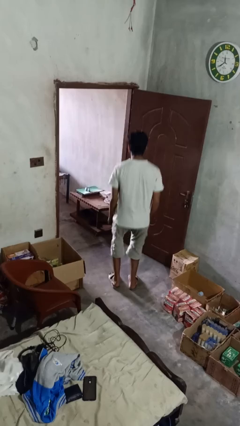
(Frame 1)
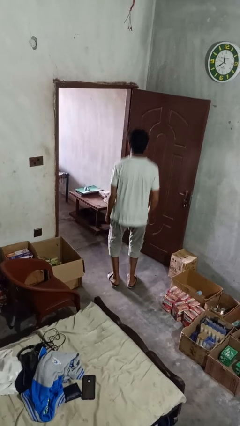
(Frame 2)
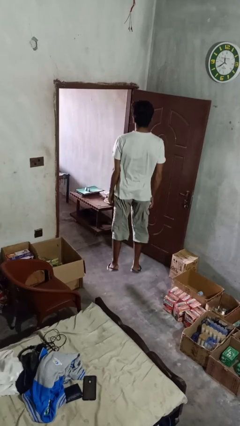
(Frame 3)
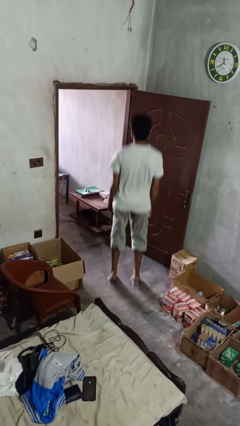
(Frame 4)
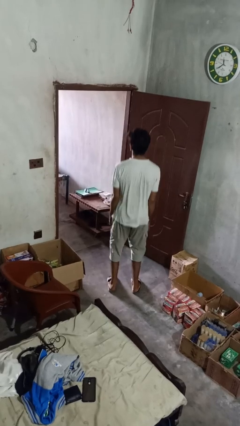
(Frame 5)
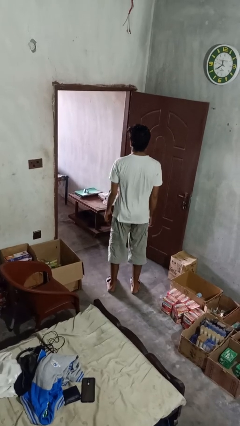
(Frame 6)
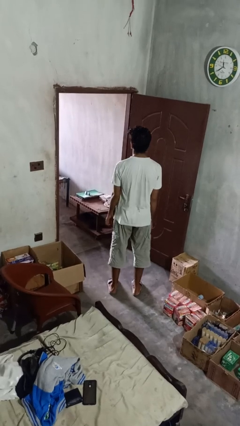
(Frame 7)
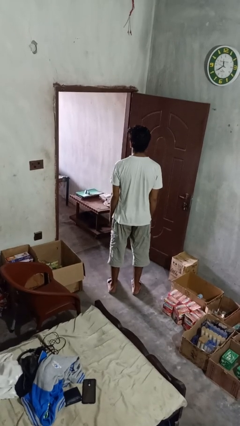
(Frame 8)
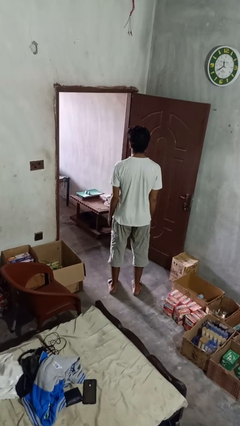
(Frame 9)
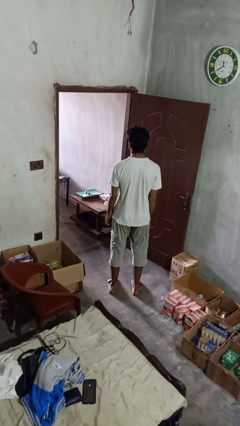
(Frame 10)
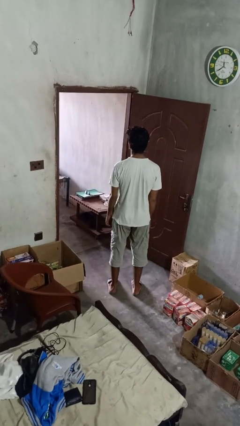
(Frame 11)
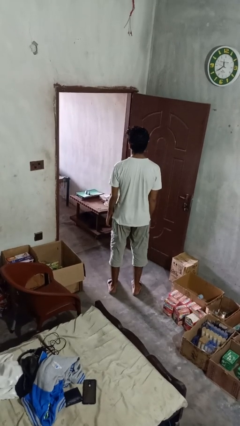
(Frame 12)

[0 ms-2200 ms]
person jumps

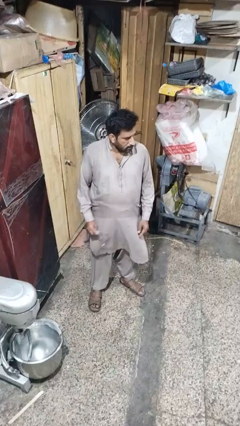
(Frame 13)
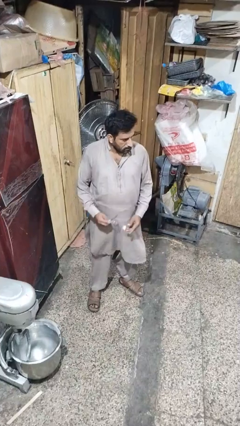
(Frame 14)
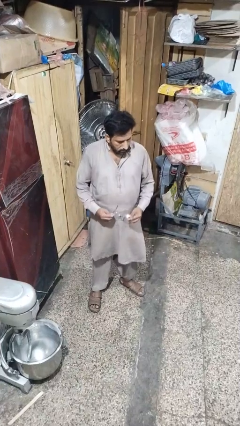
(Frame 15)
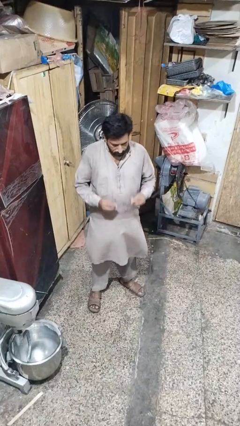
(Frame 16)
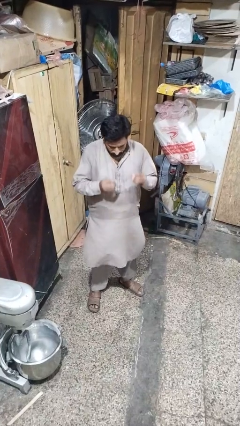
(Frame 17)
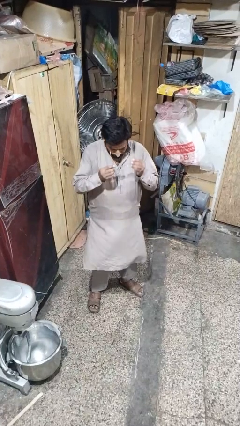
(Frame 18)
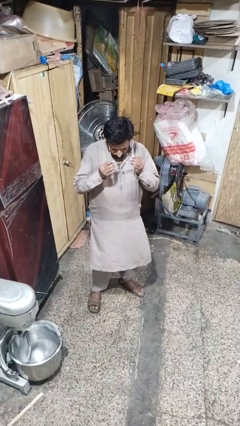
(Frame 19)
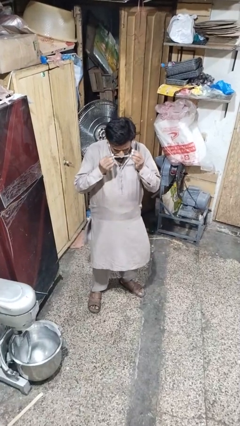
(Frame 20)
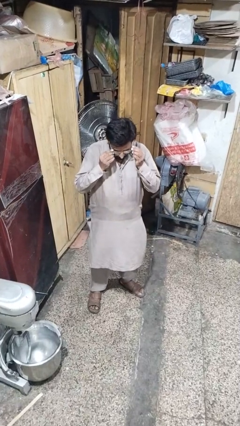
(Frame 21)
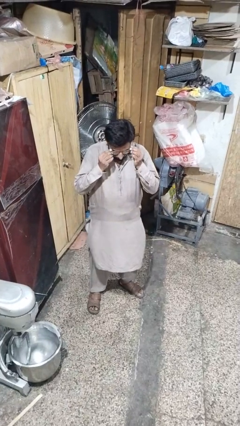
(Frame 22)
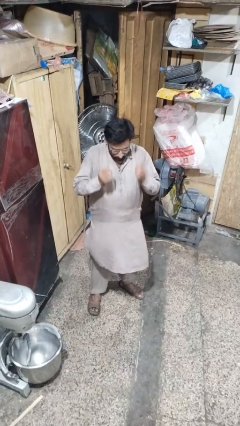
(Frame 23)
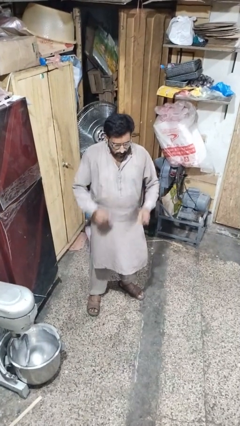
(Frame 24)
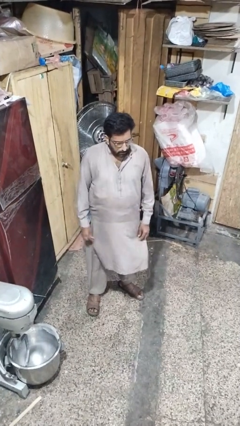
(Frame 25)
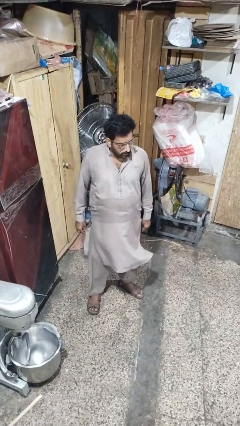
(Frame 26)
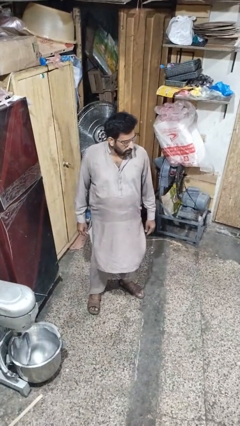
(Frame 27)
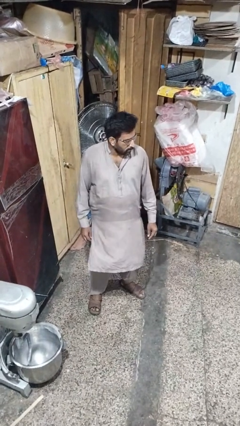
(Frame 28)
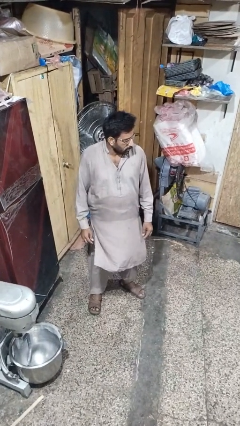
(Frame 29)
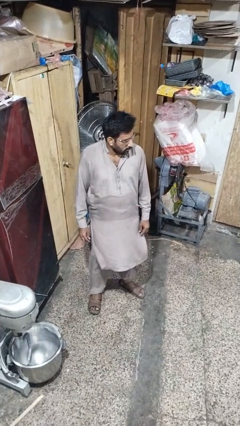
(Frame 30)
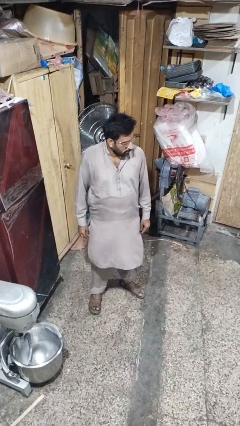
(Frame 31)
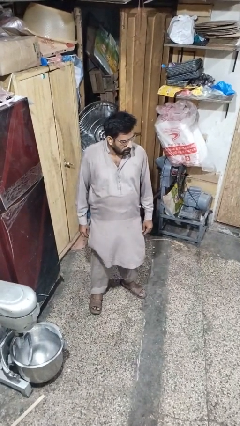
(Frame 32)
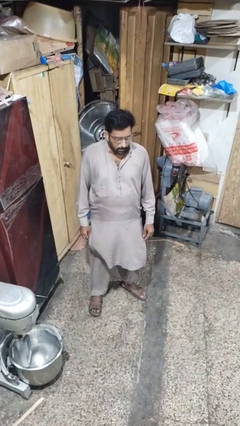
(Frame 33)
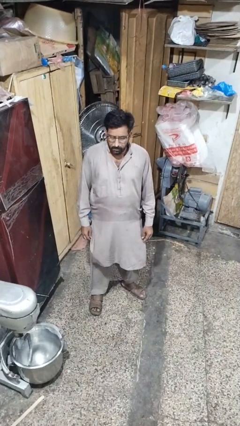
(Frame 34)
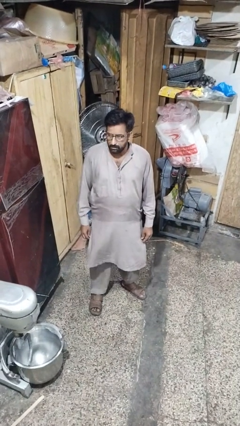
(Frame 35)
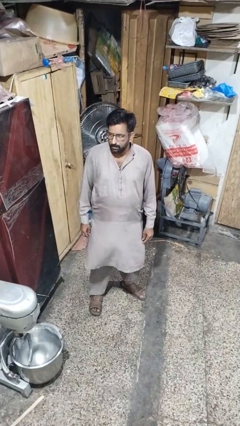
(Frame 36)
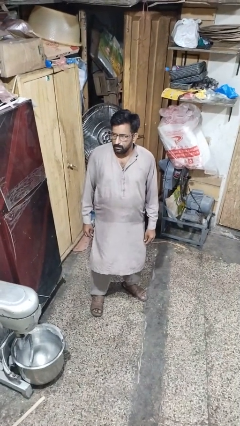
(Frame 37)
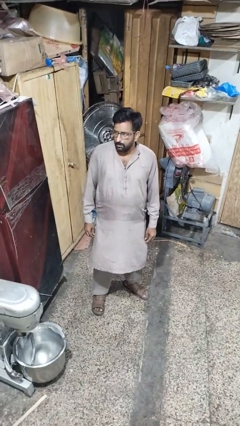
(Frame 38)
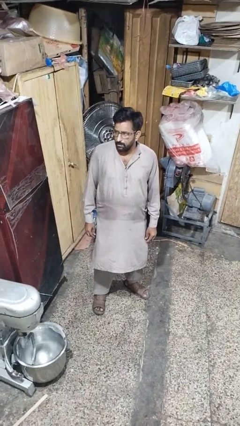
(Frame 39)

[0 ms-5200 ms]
person puts on glasses

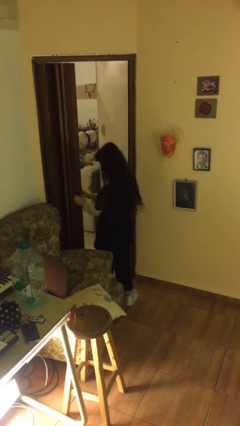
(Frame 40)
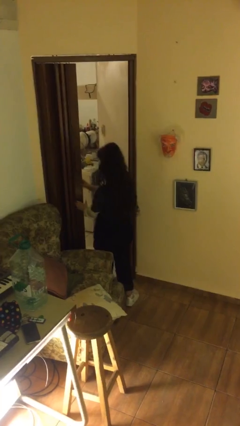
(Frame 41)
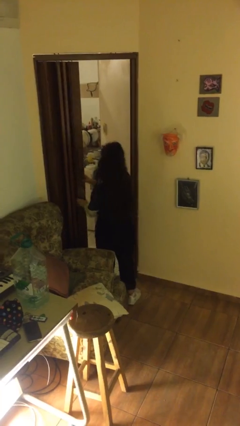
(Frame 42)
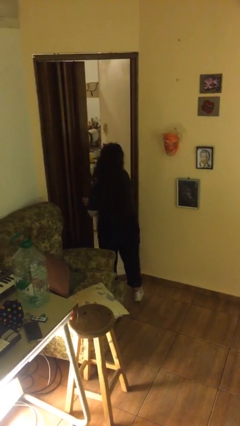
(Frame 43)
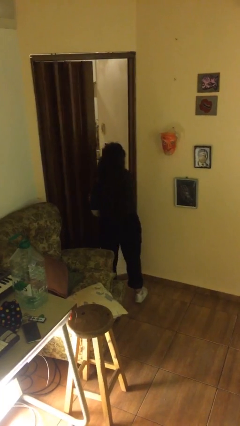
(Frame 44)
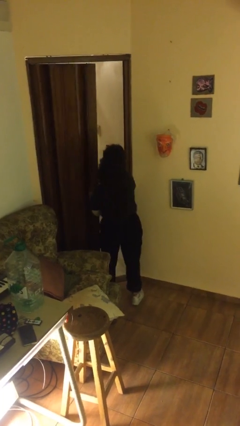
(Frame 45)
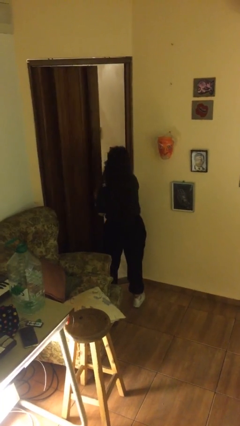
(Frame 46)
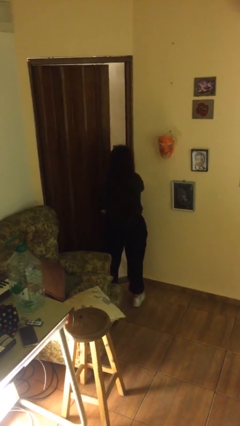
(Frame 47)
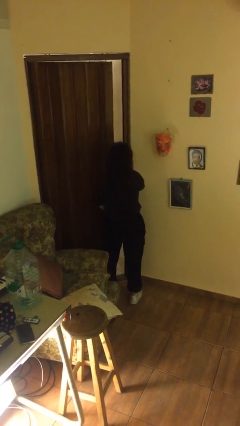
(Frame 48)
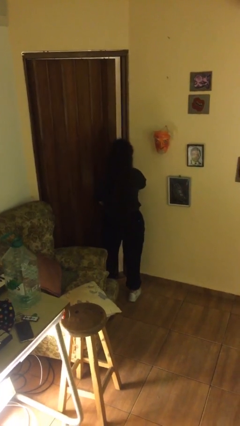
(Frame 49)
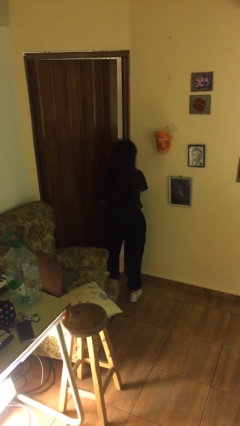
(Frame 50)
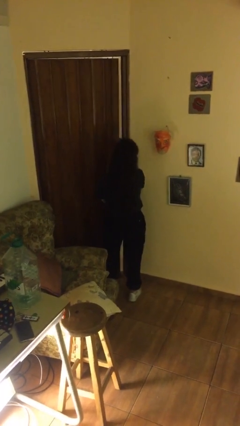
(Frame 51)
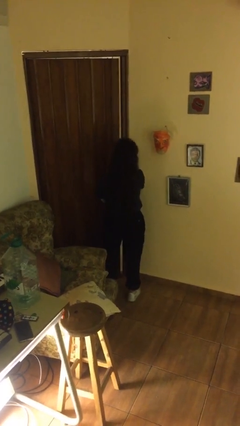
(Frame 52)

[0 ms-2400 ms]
person closes sliding door

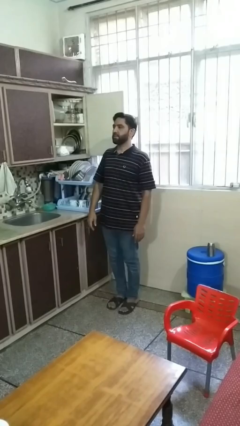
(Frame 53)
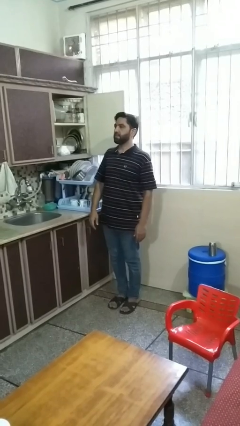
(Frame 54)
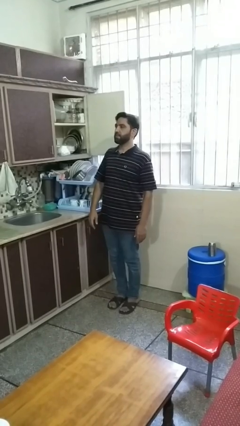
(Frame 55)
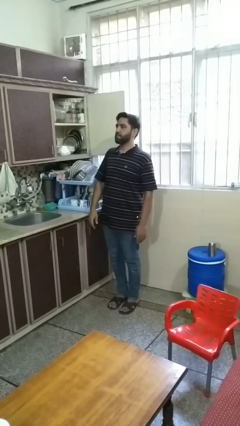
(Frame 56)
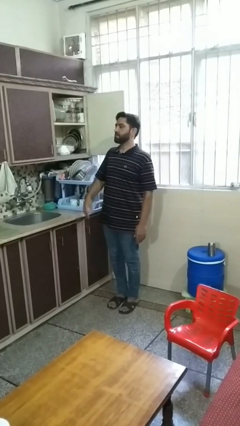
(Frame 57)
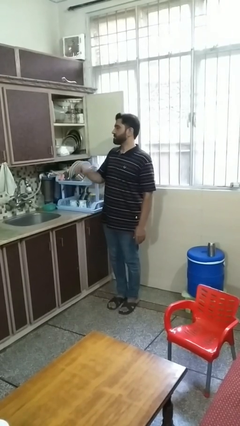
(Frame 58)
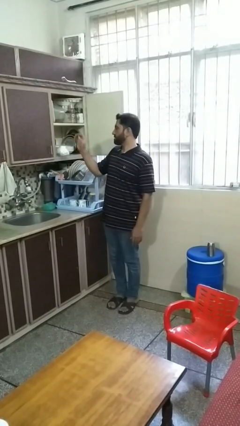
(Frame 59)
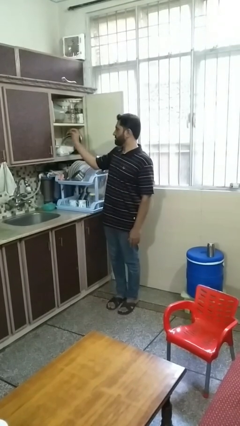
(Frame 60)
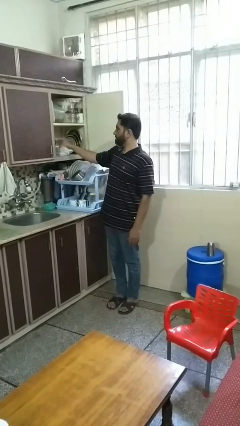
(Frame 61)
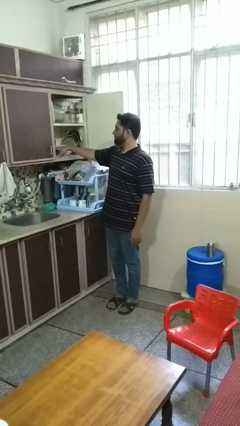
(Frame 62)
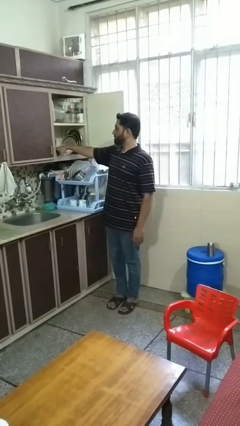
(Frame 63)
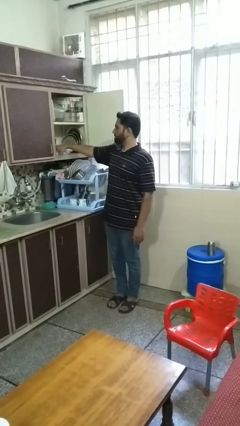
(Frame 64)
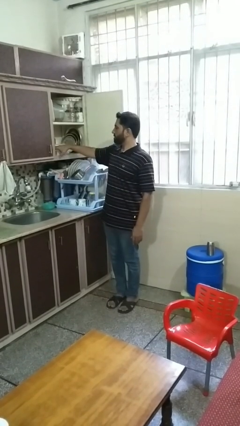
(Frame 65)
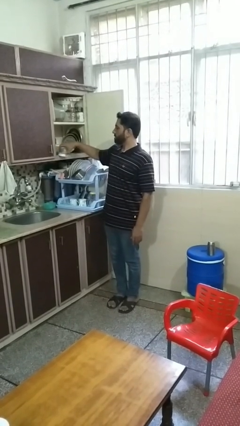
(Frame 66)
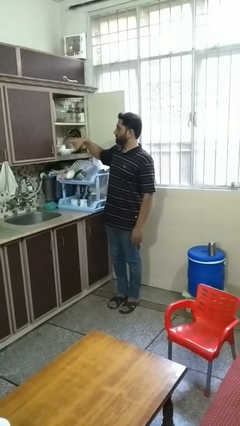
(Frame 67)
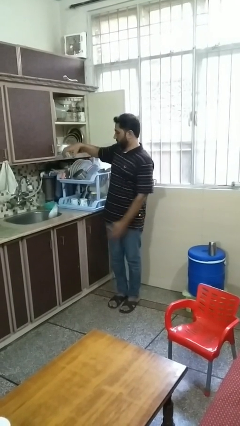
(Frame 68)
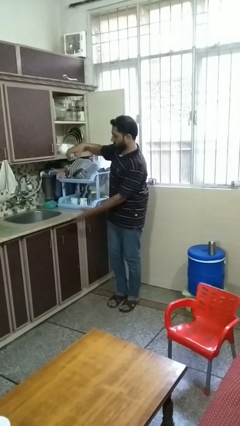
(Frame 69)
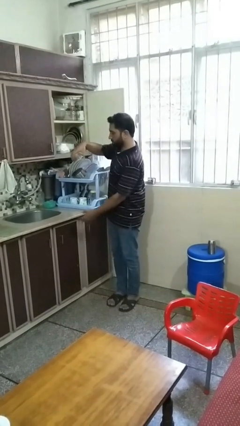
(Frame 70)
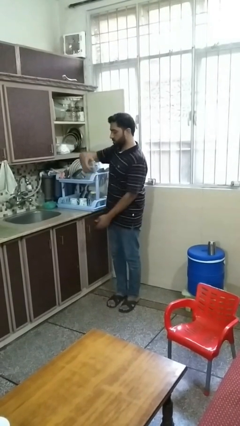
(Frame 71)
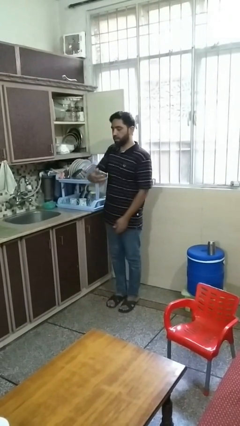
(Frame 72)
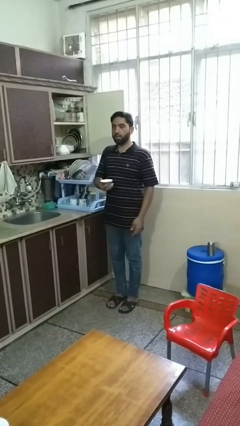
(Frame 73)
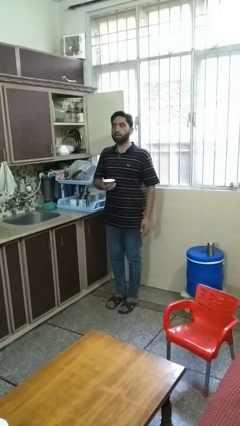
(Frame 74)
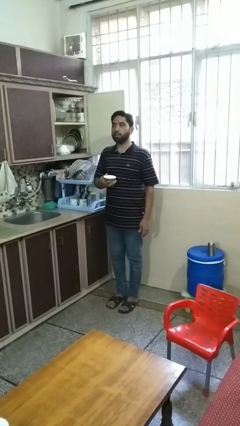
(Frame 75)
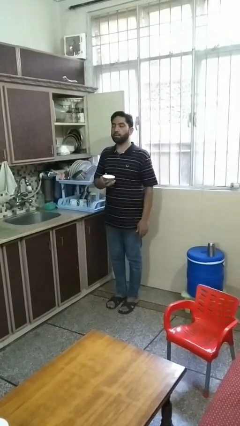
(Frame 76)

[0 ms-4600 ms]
person takes object from cabinet

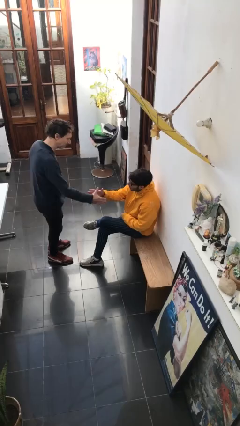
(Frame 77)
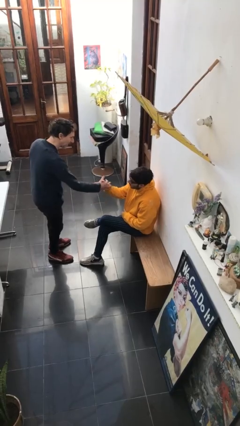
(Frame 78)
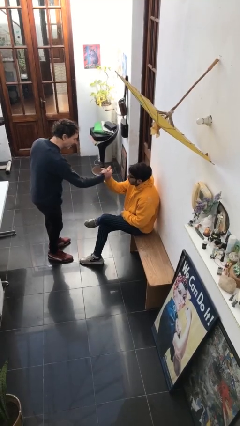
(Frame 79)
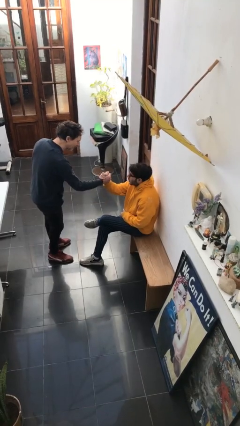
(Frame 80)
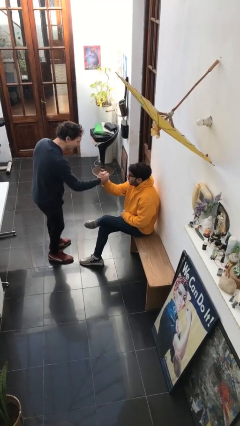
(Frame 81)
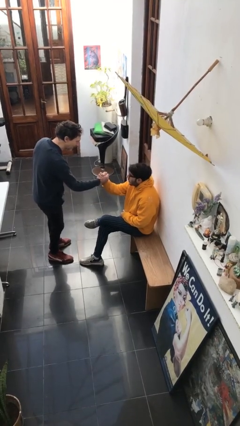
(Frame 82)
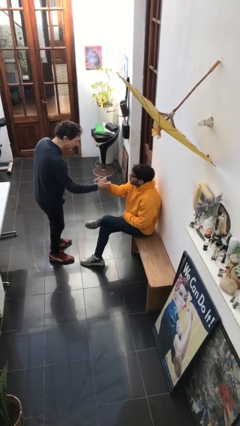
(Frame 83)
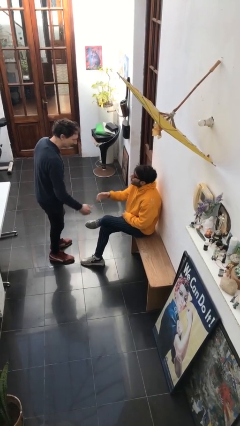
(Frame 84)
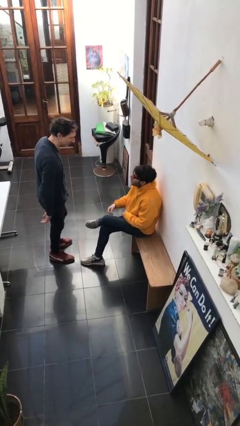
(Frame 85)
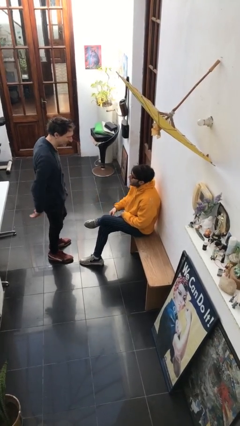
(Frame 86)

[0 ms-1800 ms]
person shakes hand

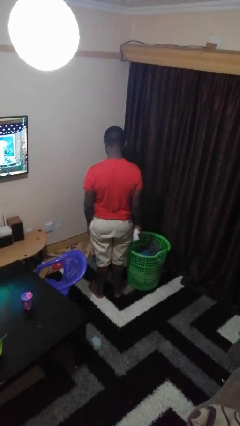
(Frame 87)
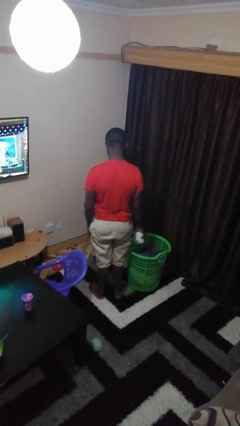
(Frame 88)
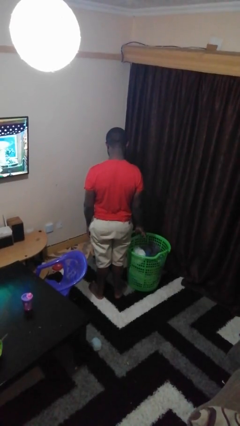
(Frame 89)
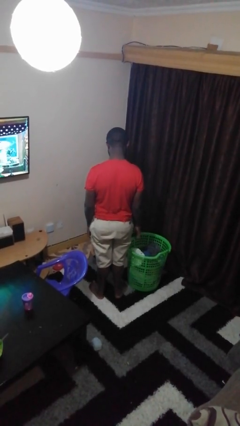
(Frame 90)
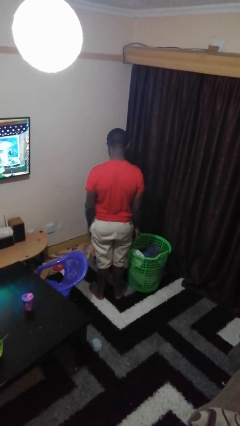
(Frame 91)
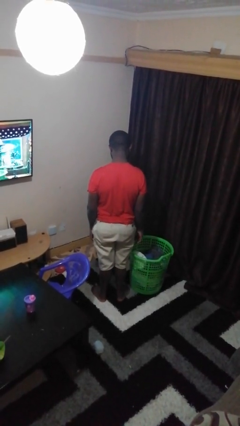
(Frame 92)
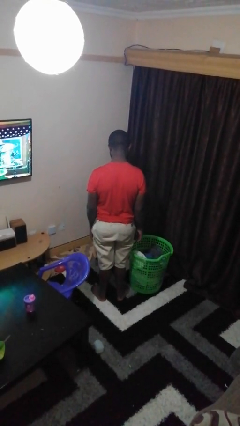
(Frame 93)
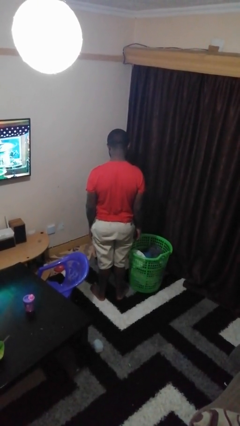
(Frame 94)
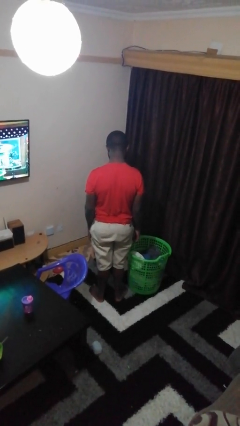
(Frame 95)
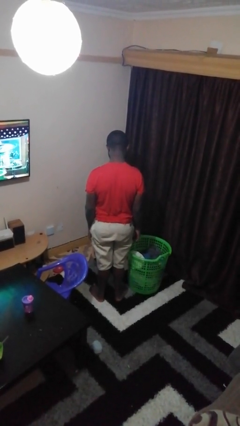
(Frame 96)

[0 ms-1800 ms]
person puts object into basket
